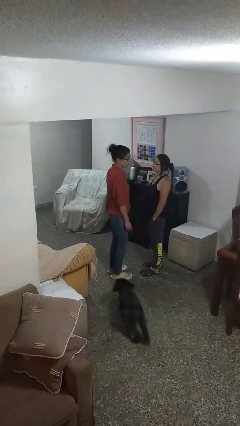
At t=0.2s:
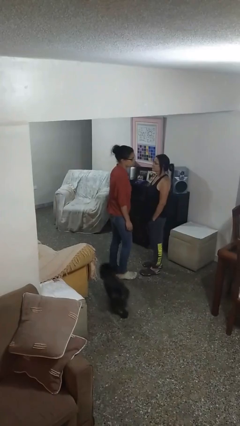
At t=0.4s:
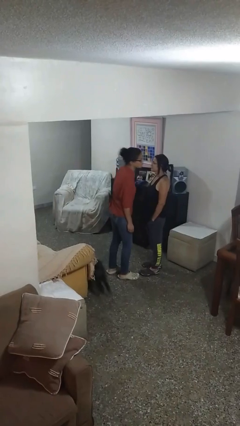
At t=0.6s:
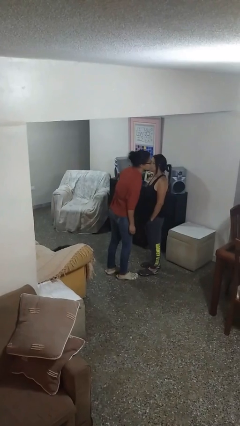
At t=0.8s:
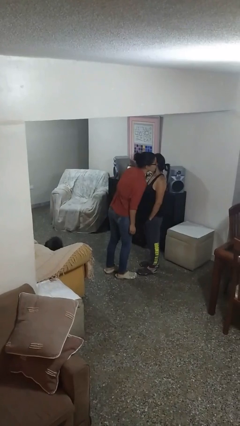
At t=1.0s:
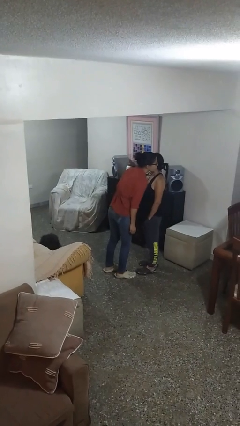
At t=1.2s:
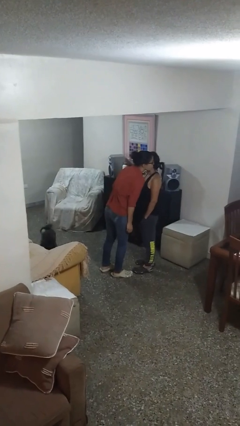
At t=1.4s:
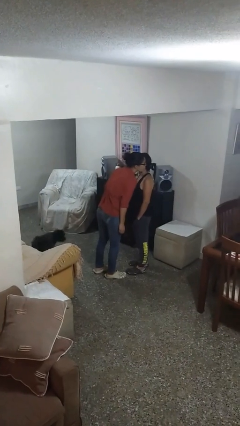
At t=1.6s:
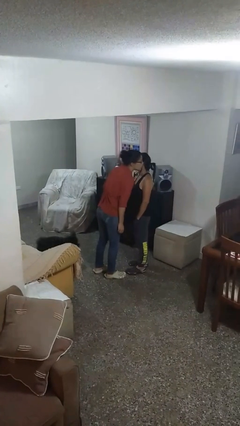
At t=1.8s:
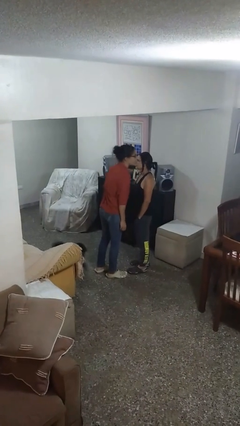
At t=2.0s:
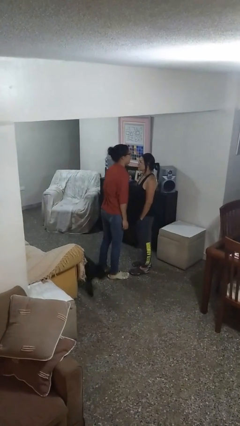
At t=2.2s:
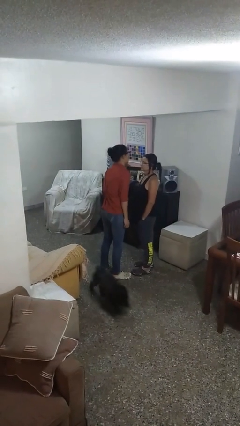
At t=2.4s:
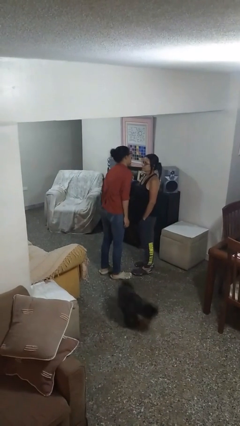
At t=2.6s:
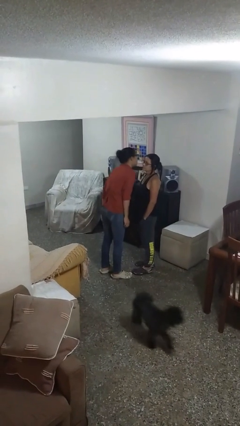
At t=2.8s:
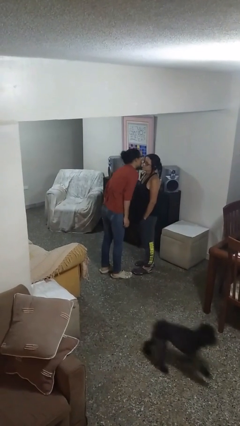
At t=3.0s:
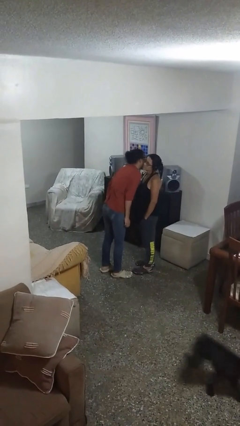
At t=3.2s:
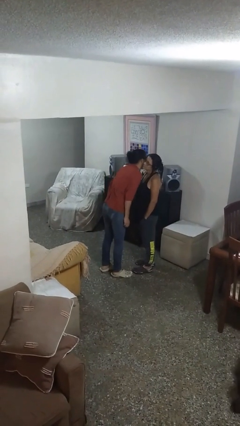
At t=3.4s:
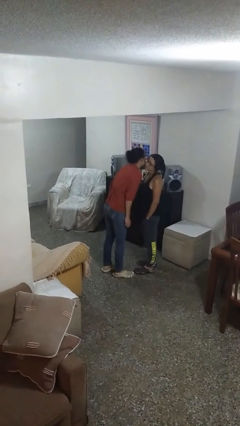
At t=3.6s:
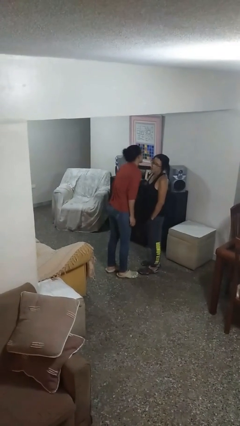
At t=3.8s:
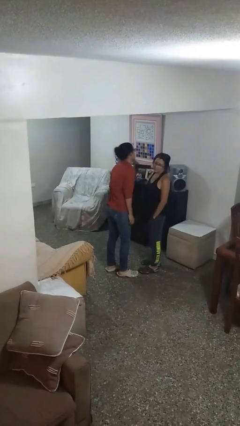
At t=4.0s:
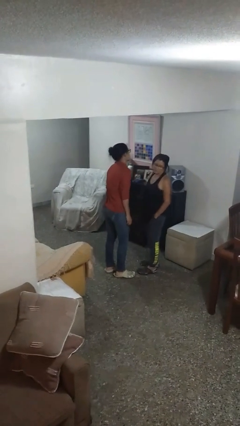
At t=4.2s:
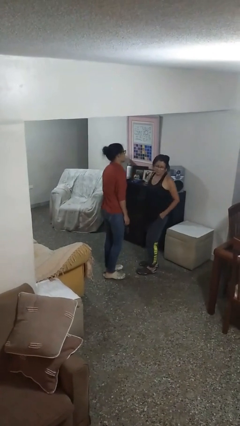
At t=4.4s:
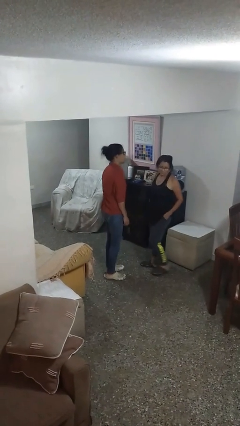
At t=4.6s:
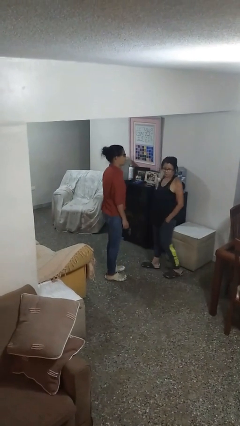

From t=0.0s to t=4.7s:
person kisses cheek of person

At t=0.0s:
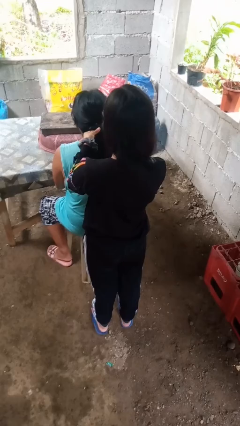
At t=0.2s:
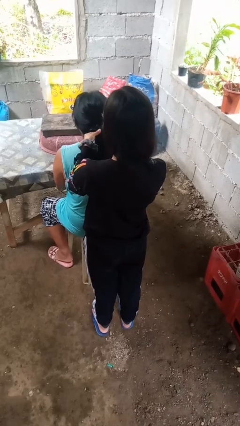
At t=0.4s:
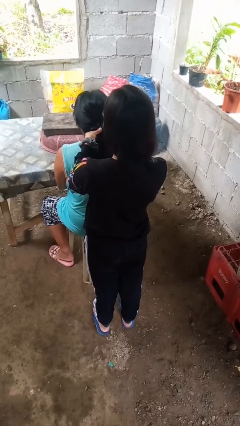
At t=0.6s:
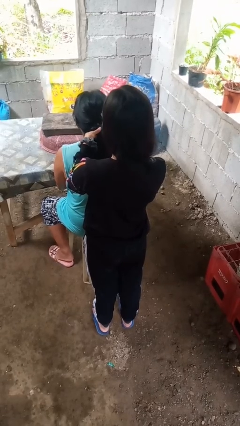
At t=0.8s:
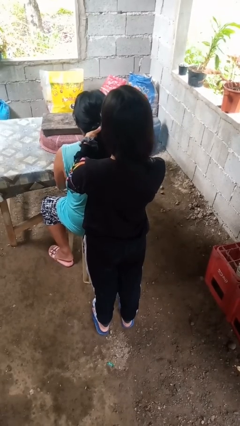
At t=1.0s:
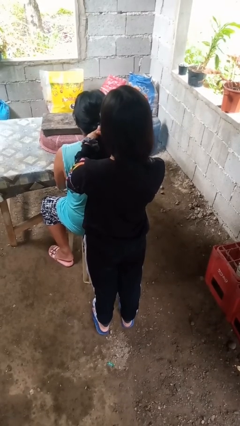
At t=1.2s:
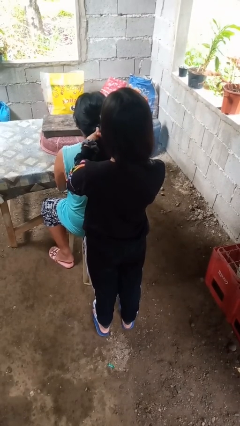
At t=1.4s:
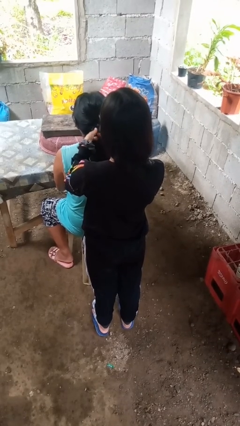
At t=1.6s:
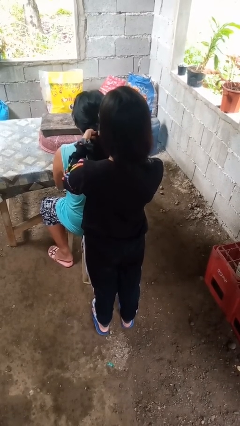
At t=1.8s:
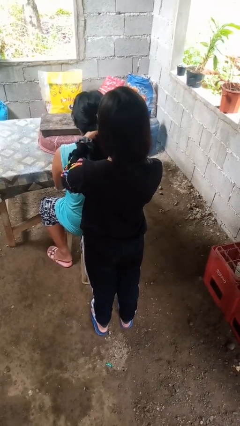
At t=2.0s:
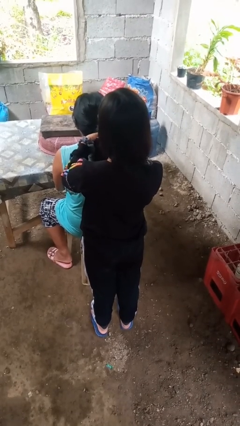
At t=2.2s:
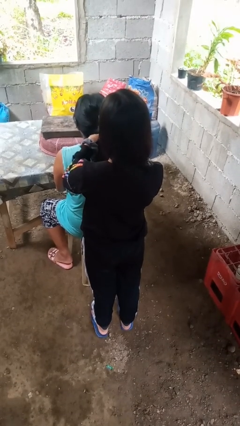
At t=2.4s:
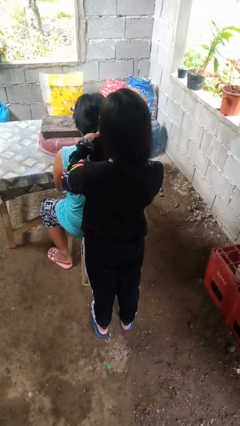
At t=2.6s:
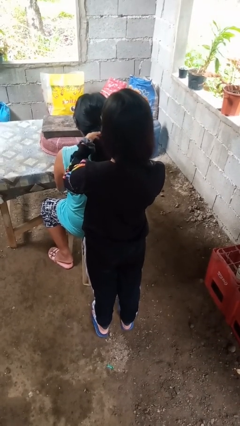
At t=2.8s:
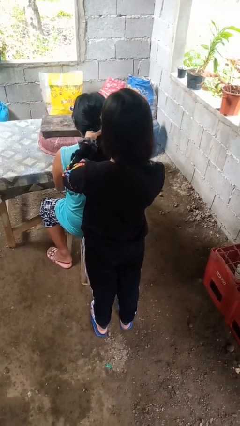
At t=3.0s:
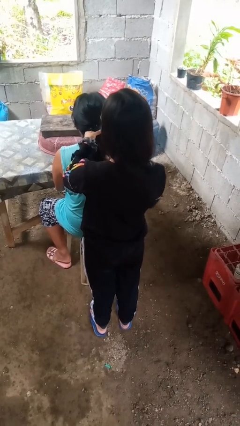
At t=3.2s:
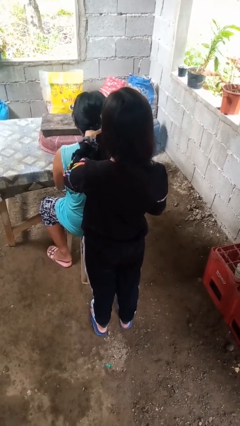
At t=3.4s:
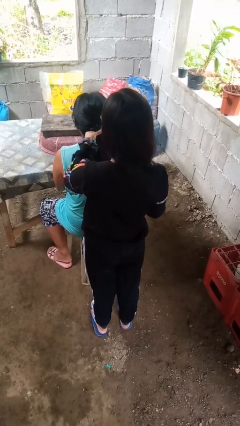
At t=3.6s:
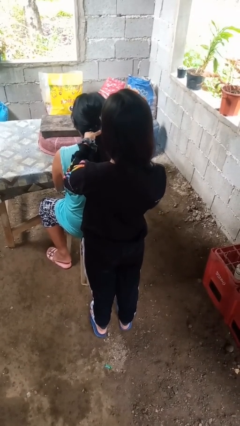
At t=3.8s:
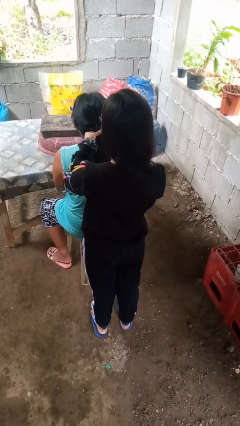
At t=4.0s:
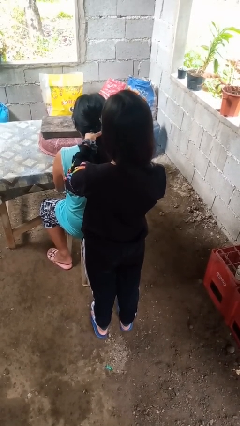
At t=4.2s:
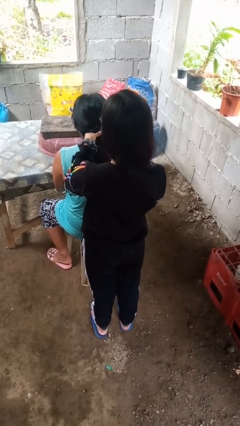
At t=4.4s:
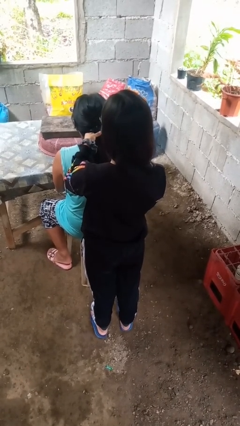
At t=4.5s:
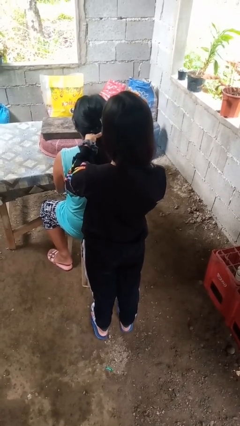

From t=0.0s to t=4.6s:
person braids hair of person

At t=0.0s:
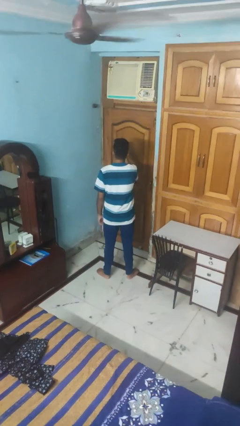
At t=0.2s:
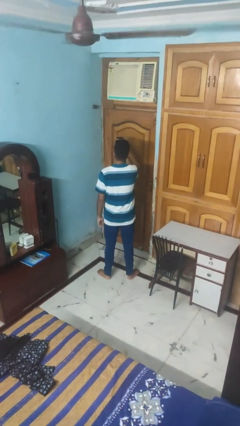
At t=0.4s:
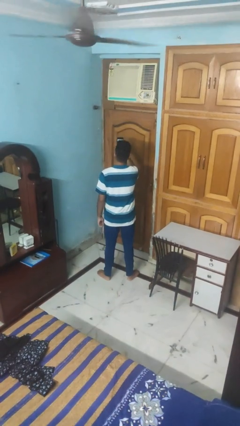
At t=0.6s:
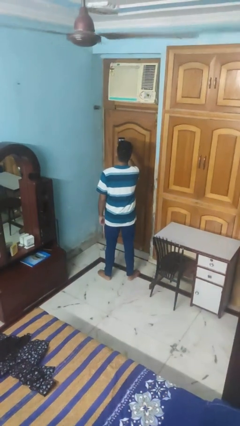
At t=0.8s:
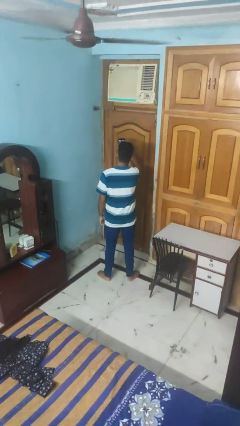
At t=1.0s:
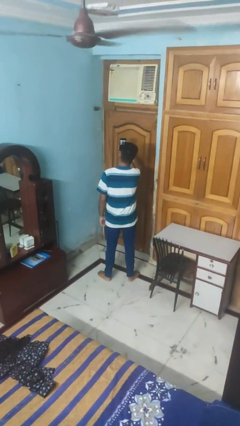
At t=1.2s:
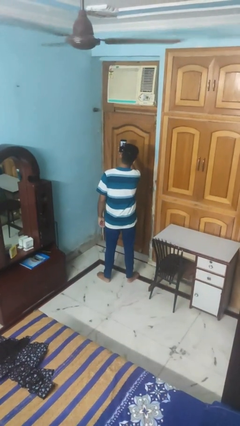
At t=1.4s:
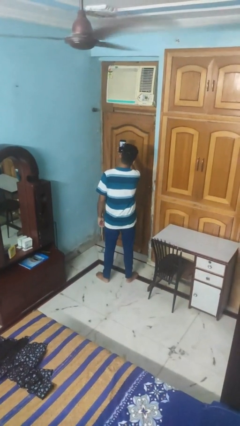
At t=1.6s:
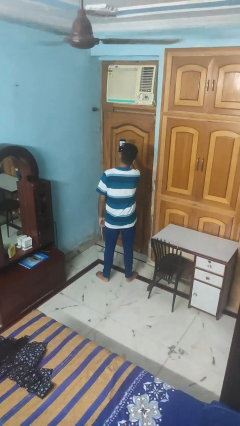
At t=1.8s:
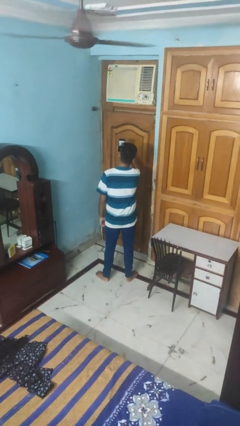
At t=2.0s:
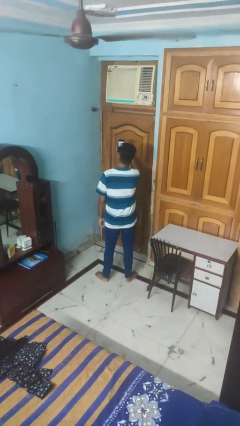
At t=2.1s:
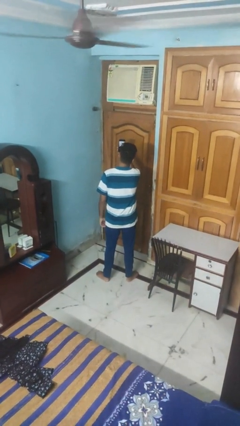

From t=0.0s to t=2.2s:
person takes selfie

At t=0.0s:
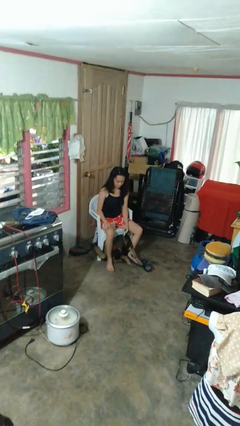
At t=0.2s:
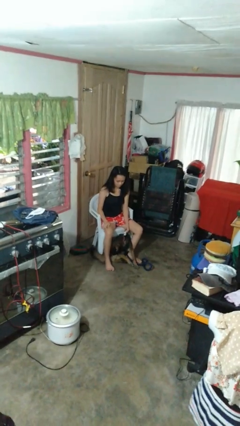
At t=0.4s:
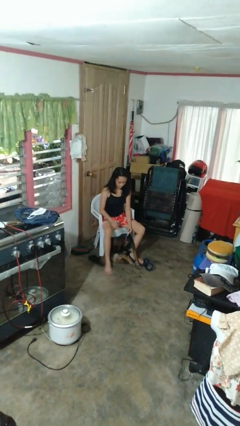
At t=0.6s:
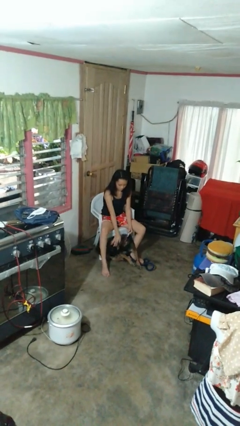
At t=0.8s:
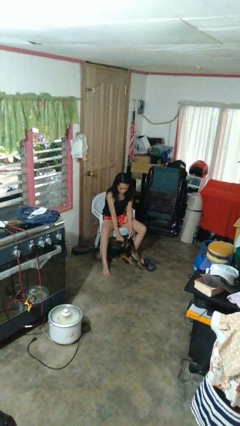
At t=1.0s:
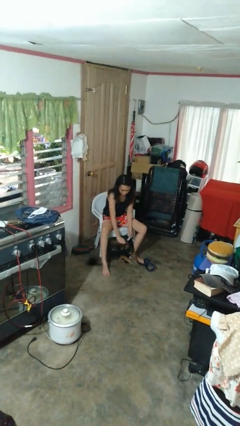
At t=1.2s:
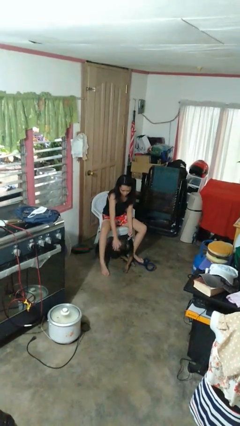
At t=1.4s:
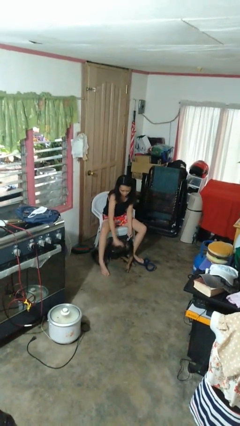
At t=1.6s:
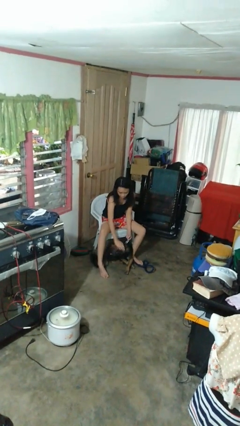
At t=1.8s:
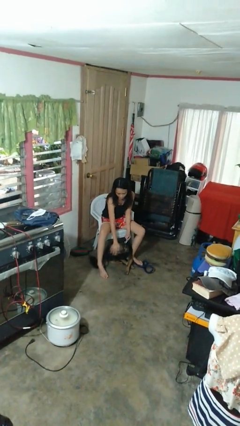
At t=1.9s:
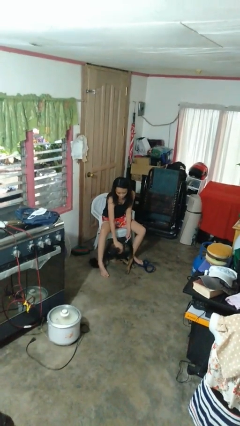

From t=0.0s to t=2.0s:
person pets dog

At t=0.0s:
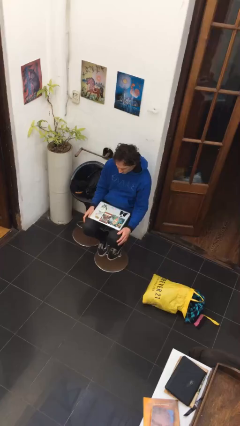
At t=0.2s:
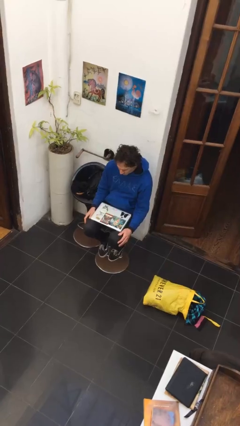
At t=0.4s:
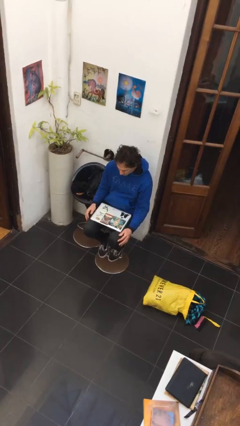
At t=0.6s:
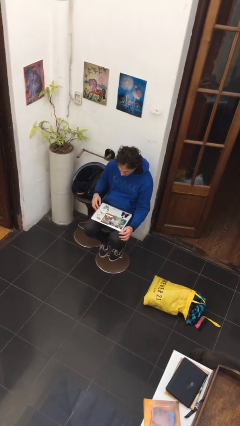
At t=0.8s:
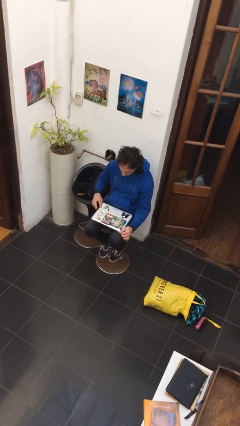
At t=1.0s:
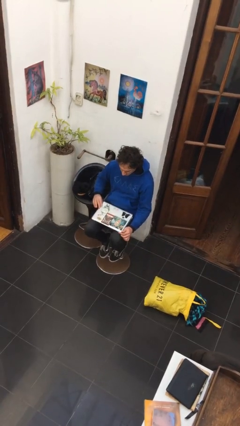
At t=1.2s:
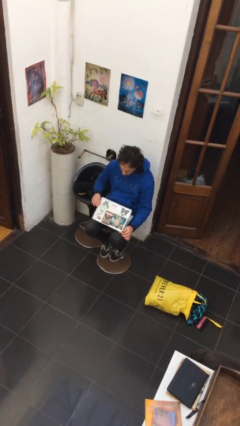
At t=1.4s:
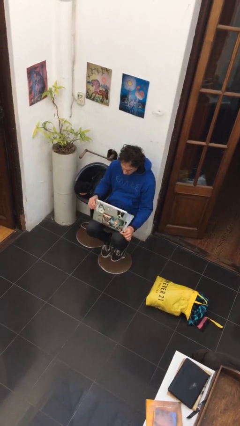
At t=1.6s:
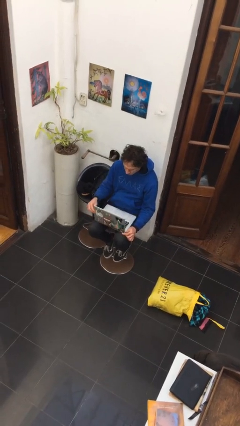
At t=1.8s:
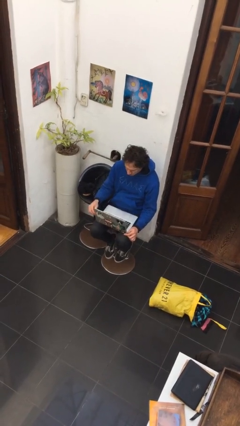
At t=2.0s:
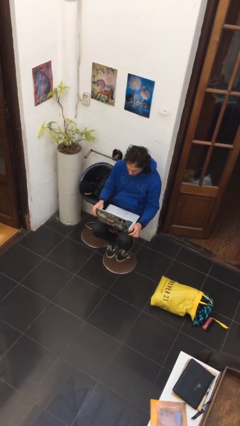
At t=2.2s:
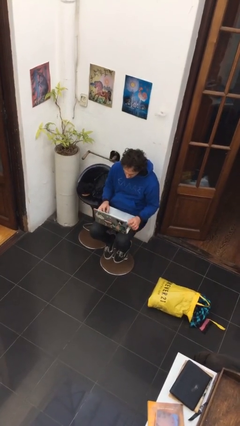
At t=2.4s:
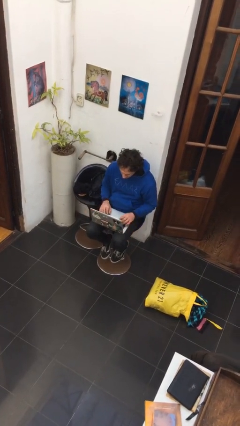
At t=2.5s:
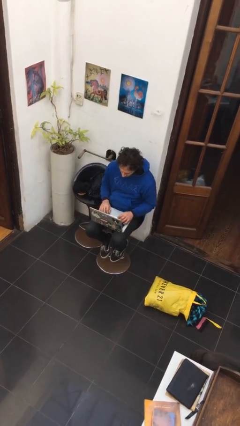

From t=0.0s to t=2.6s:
person opens laptop

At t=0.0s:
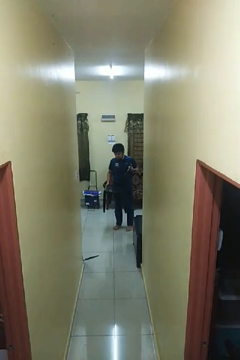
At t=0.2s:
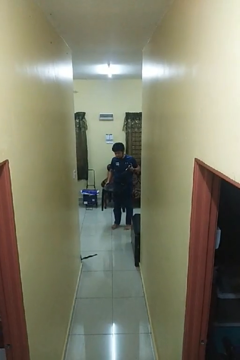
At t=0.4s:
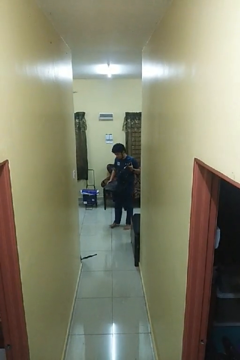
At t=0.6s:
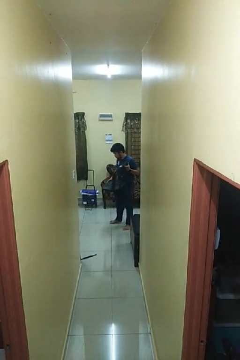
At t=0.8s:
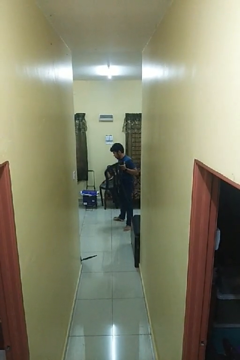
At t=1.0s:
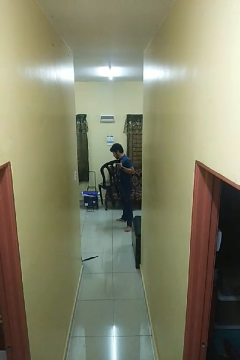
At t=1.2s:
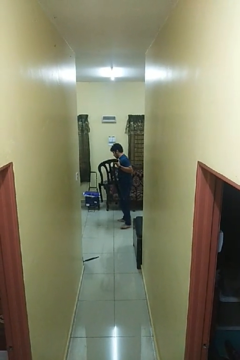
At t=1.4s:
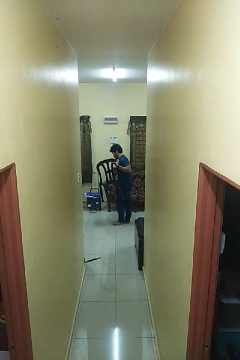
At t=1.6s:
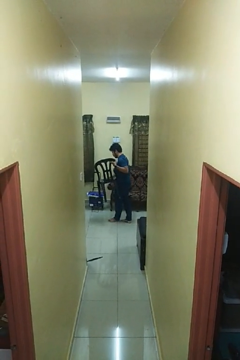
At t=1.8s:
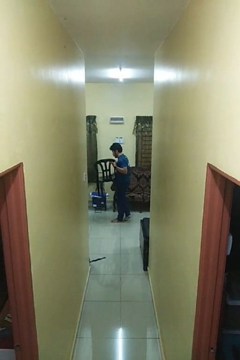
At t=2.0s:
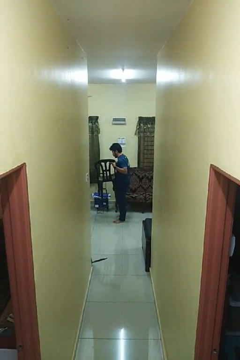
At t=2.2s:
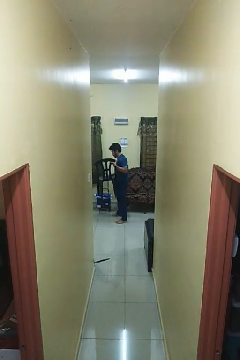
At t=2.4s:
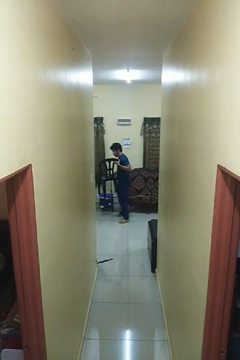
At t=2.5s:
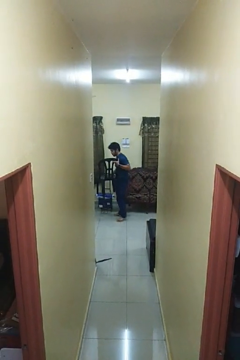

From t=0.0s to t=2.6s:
person carries furniture
